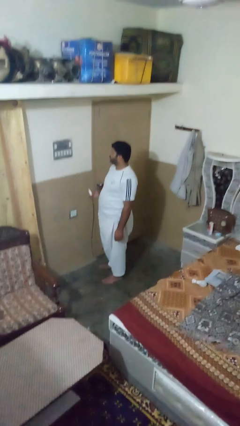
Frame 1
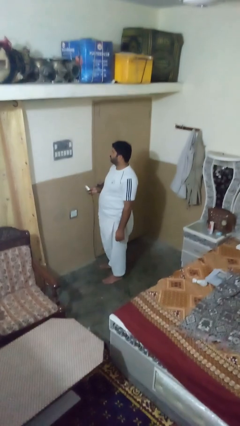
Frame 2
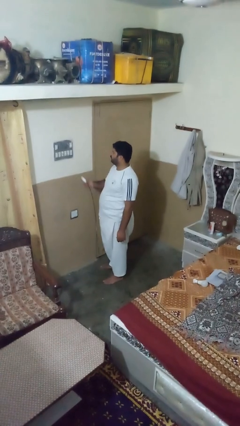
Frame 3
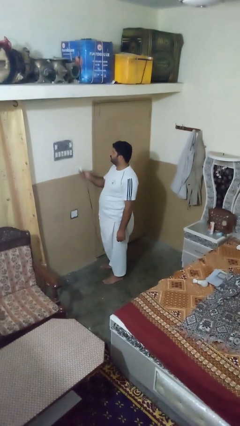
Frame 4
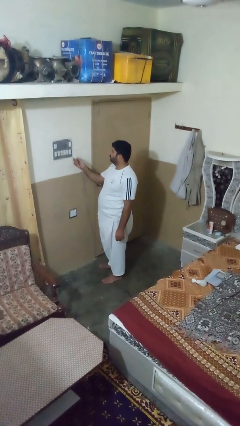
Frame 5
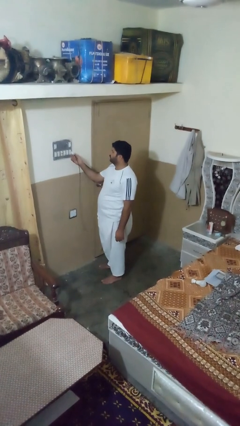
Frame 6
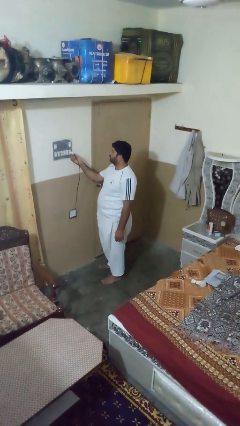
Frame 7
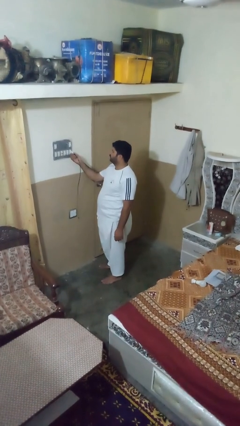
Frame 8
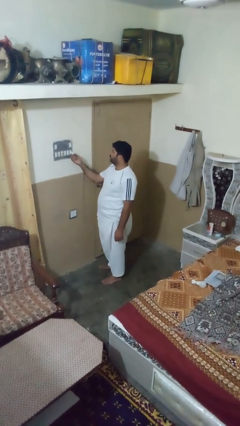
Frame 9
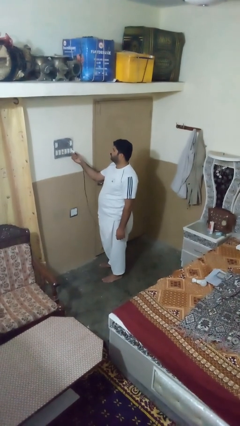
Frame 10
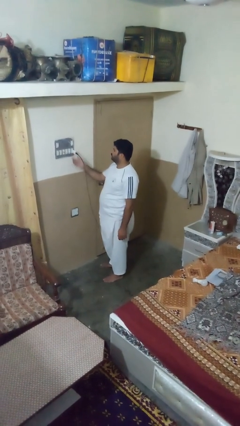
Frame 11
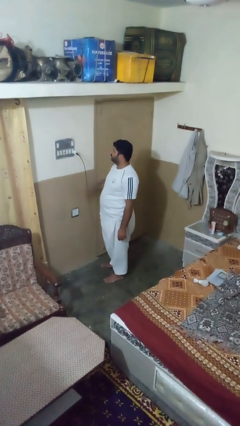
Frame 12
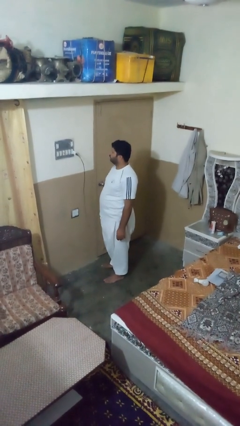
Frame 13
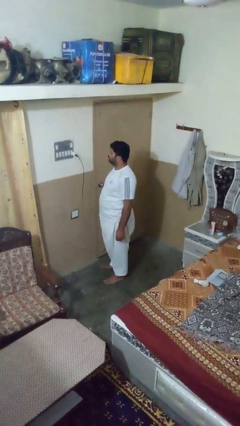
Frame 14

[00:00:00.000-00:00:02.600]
person plugs into electrical socket

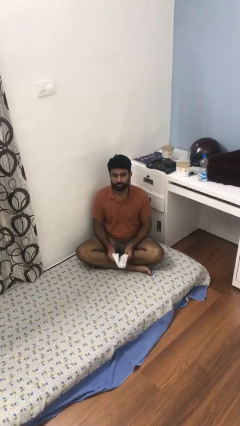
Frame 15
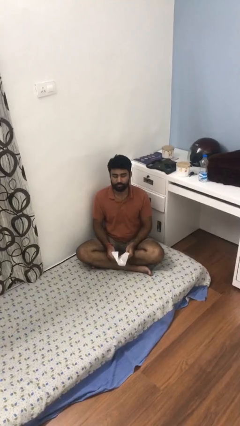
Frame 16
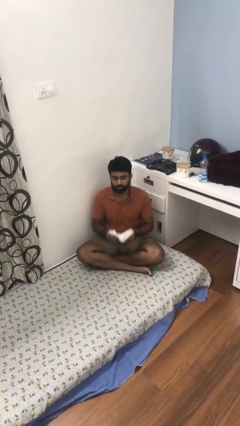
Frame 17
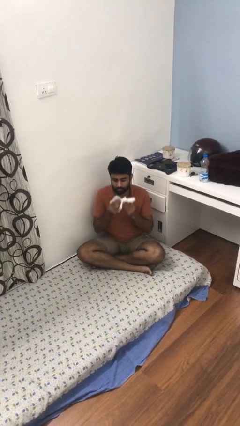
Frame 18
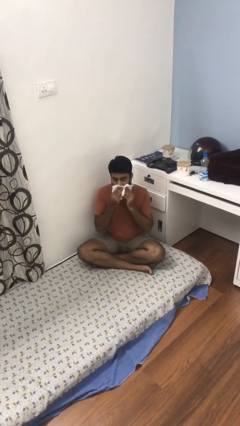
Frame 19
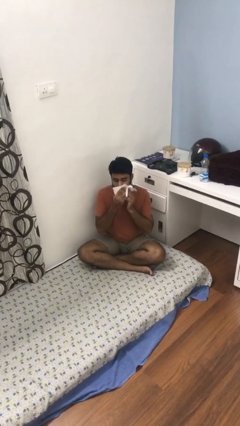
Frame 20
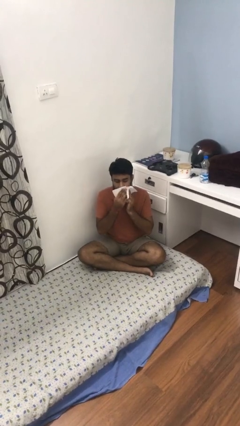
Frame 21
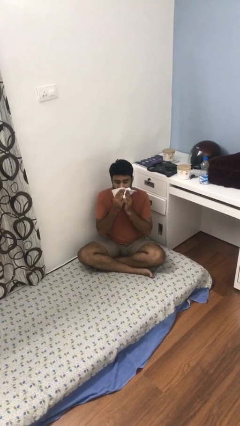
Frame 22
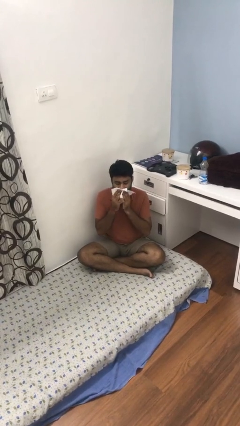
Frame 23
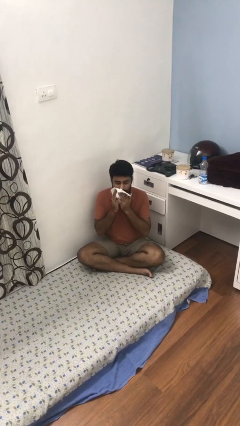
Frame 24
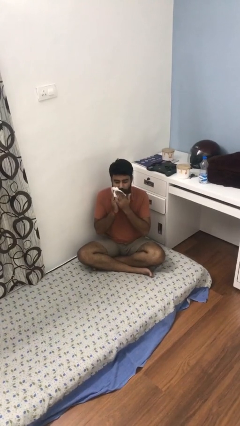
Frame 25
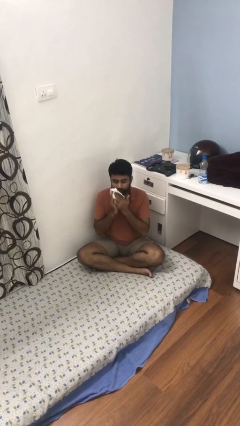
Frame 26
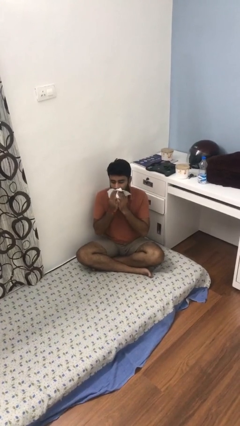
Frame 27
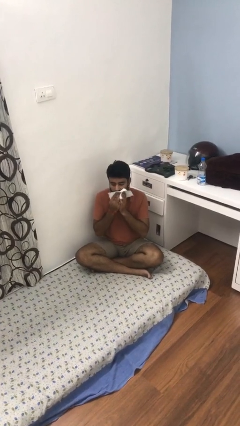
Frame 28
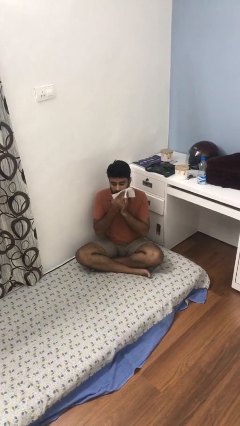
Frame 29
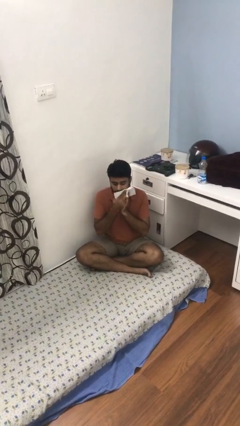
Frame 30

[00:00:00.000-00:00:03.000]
person wipes mouth with napkin

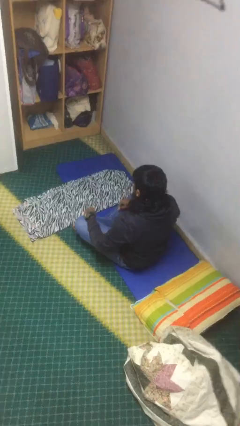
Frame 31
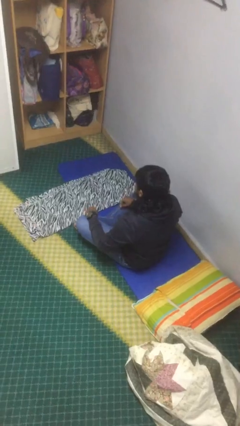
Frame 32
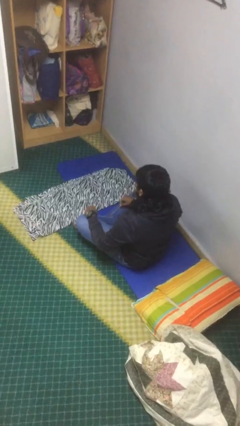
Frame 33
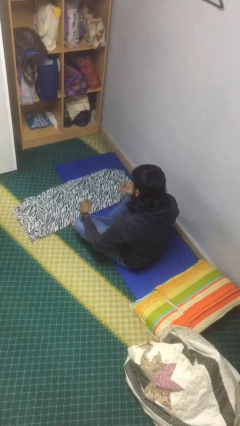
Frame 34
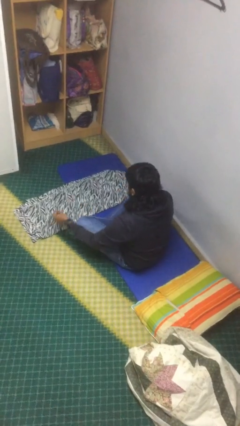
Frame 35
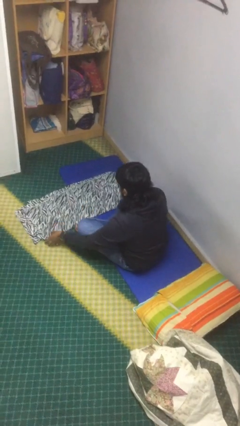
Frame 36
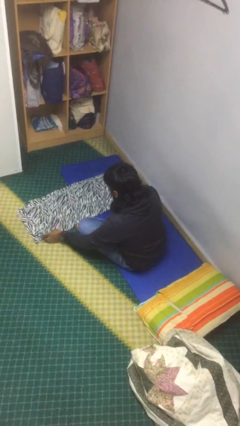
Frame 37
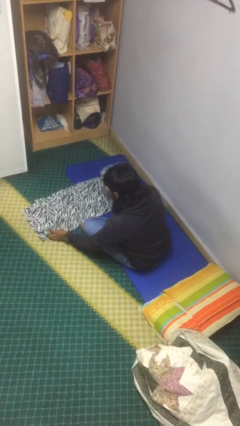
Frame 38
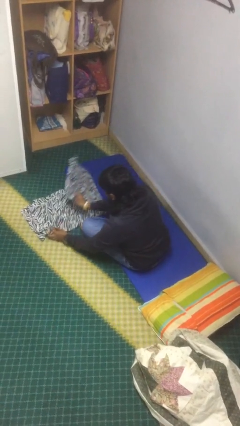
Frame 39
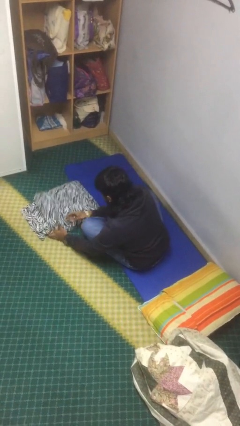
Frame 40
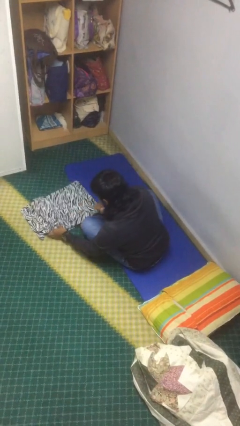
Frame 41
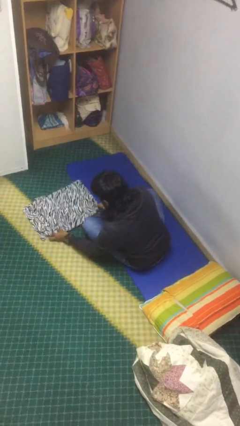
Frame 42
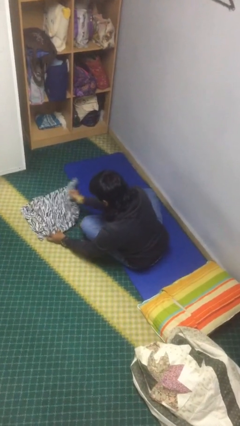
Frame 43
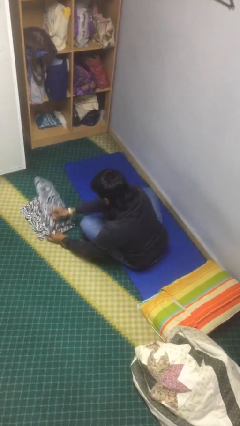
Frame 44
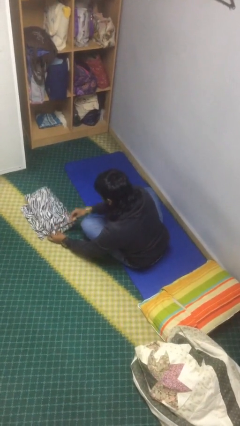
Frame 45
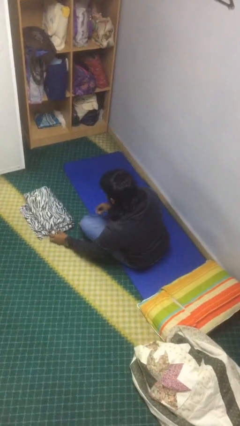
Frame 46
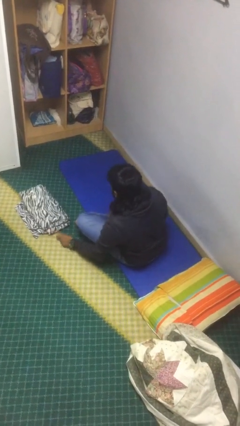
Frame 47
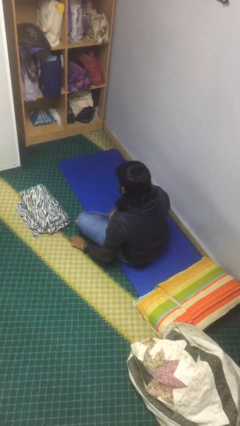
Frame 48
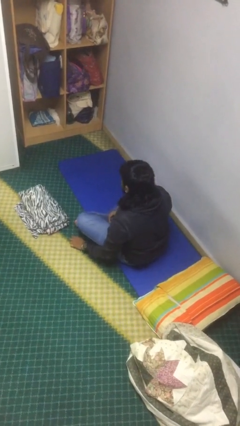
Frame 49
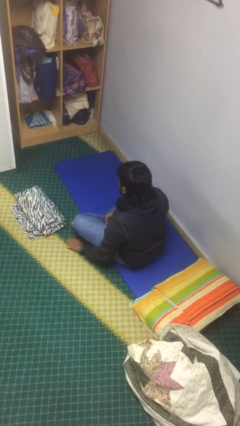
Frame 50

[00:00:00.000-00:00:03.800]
person folds blanket

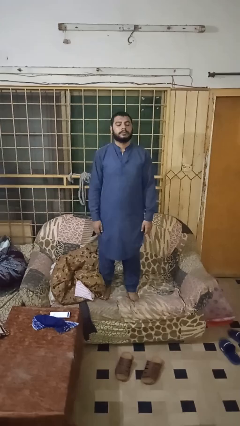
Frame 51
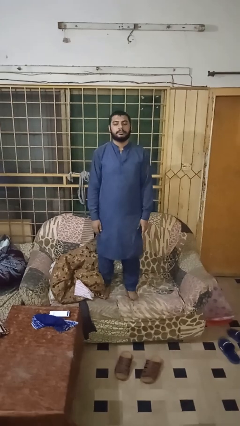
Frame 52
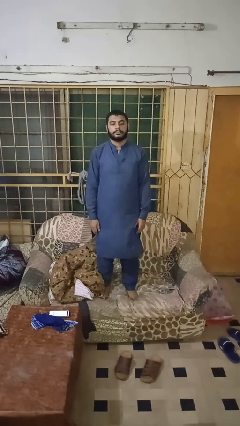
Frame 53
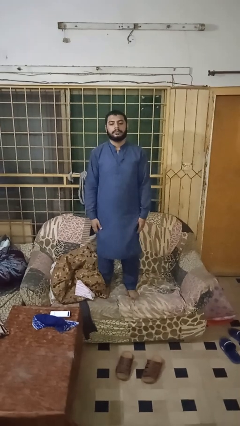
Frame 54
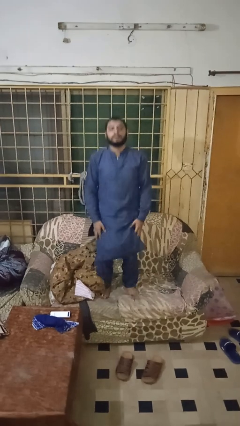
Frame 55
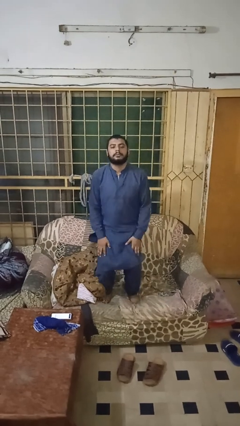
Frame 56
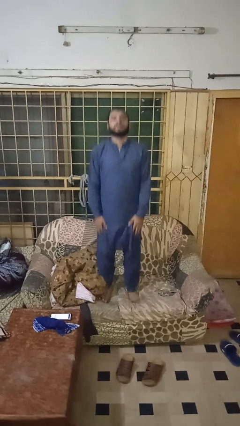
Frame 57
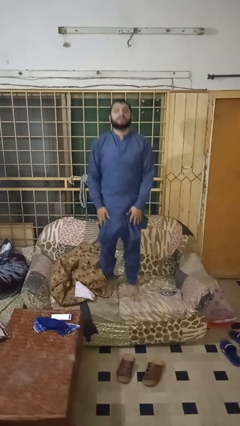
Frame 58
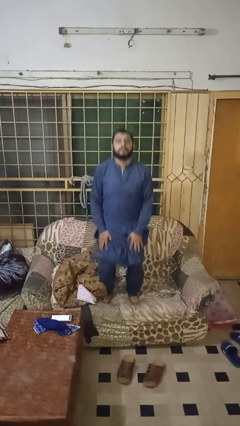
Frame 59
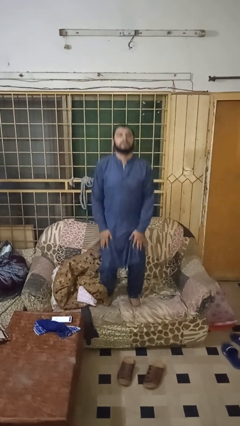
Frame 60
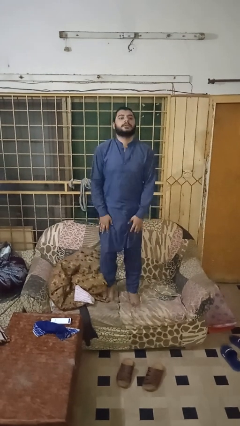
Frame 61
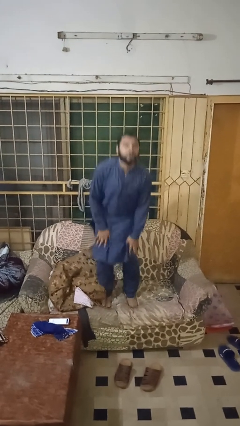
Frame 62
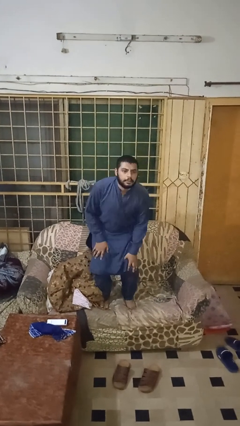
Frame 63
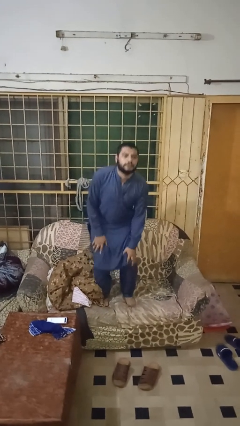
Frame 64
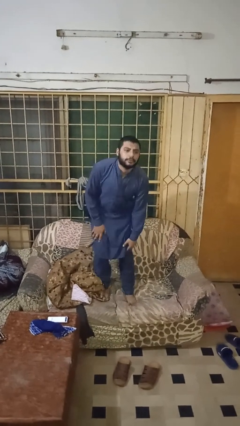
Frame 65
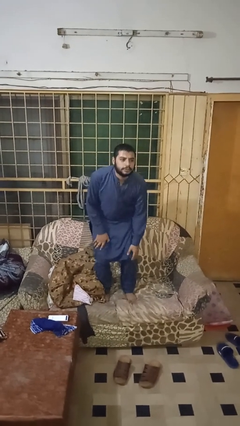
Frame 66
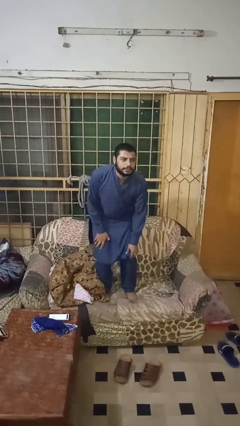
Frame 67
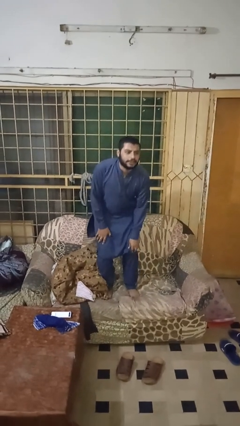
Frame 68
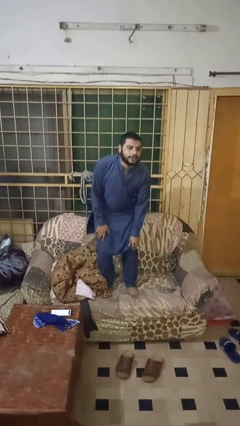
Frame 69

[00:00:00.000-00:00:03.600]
person jumps on couch

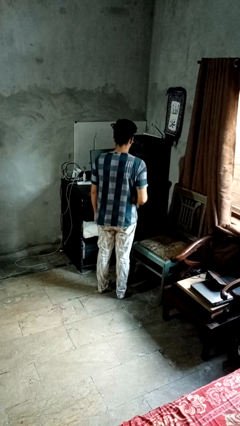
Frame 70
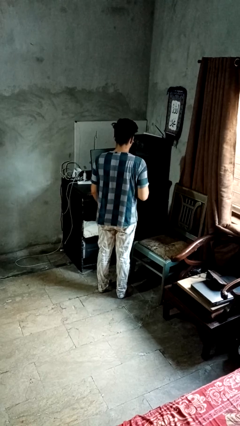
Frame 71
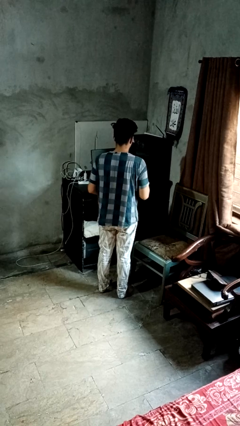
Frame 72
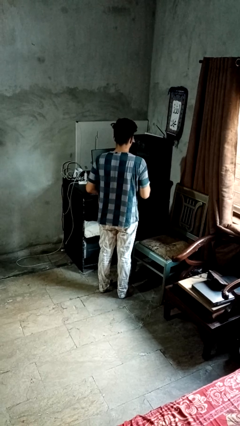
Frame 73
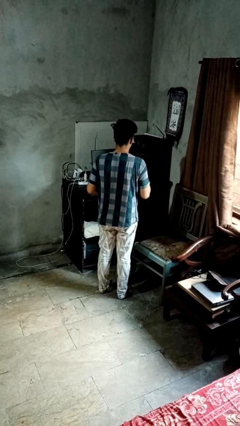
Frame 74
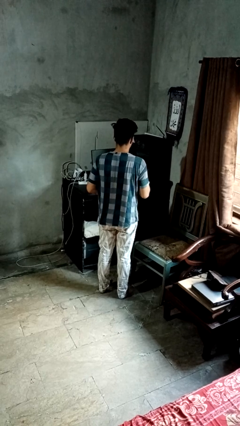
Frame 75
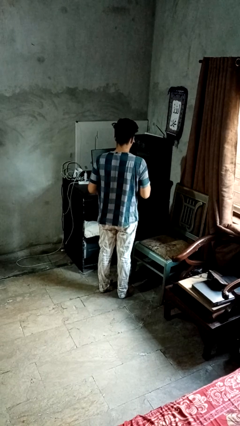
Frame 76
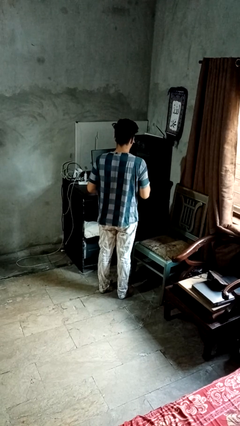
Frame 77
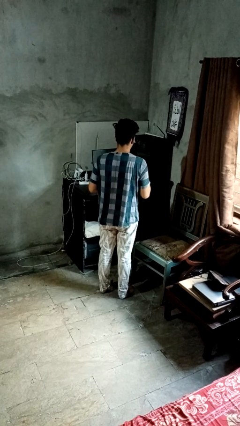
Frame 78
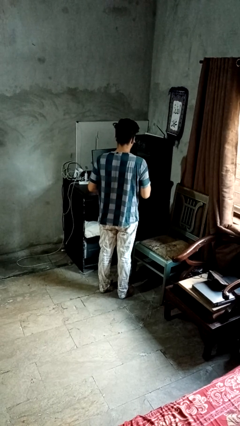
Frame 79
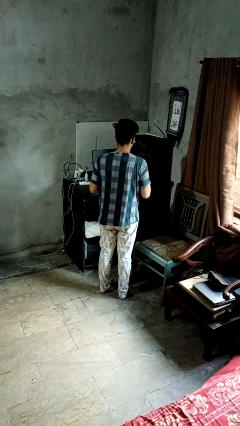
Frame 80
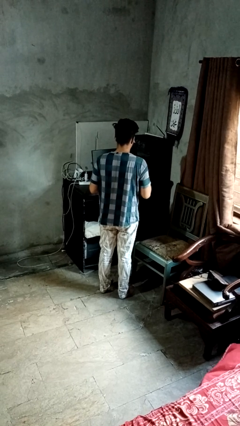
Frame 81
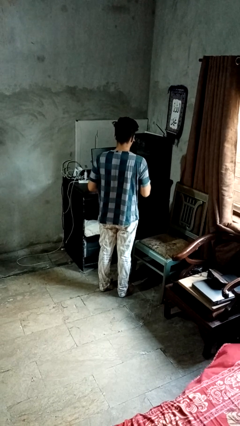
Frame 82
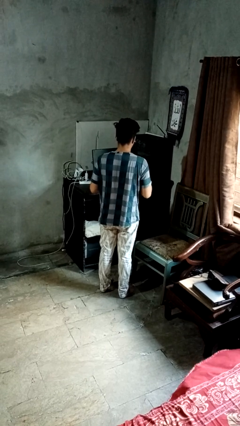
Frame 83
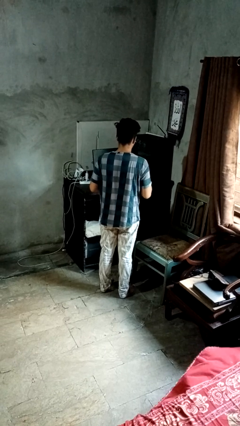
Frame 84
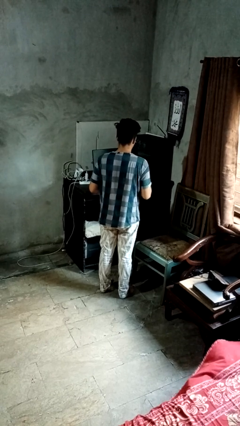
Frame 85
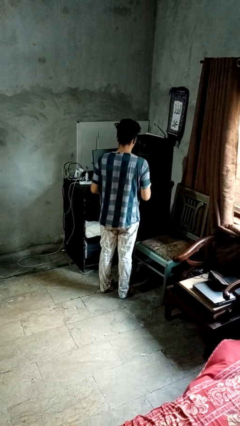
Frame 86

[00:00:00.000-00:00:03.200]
person drums on chest

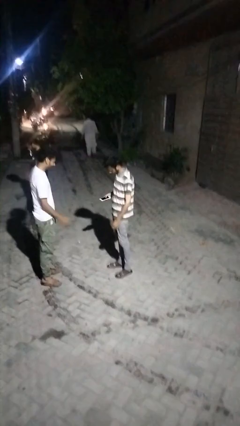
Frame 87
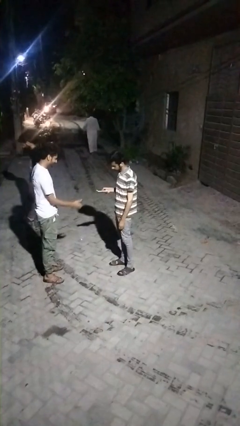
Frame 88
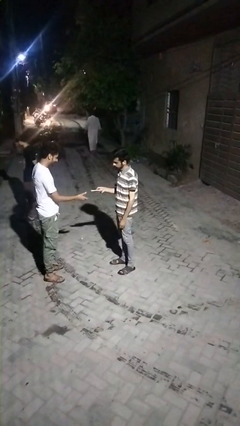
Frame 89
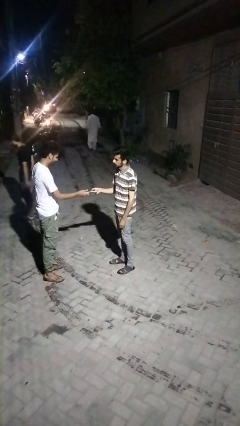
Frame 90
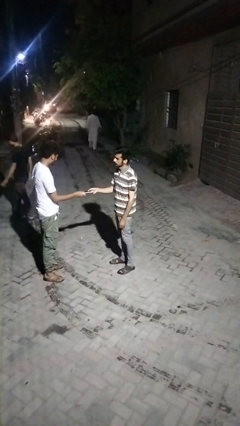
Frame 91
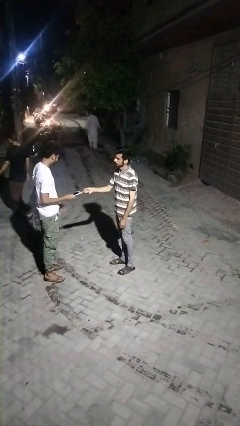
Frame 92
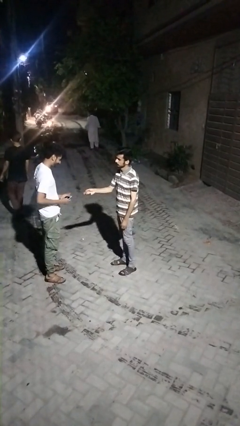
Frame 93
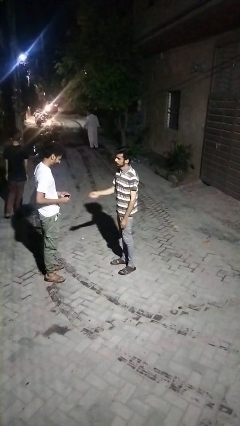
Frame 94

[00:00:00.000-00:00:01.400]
person transfers object to person

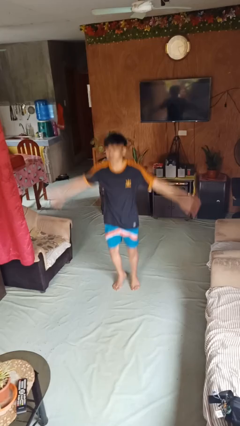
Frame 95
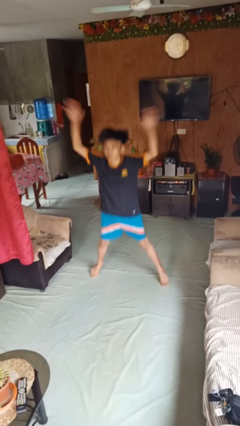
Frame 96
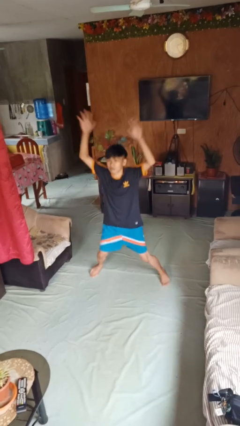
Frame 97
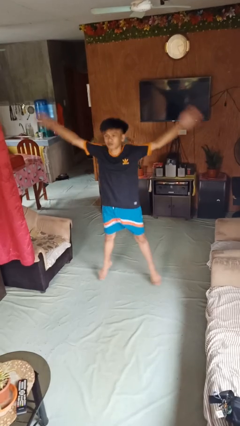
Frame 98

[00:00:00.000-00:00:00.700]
person exercises with jumping jacks
